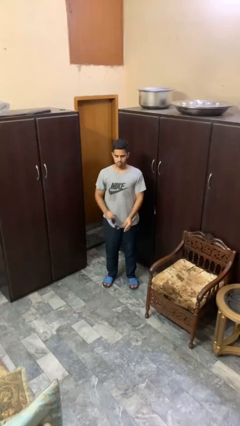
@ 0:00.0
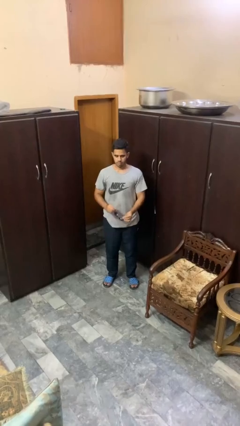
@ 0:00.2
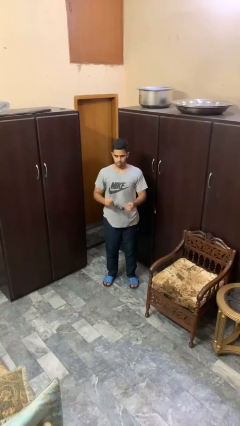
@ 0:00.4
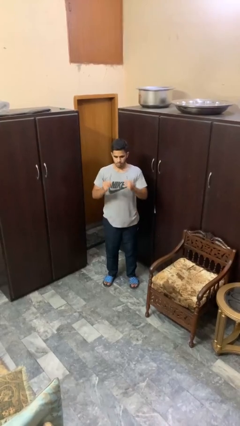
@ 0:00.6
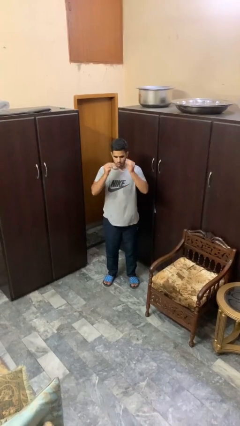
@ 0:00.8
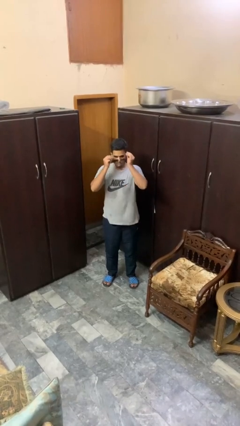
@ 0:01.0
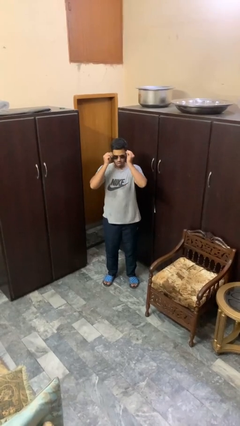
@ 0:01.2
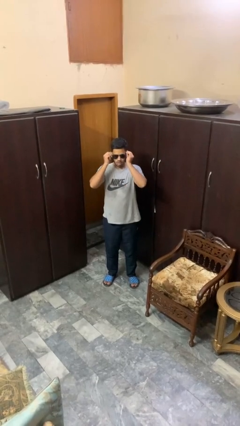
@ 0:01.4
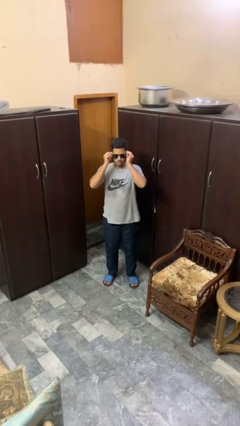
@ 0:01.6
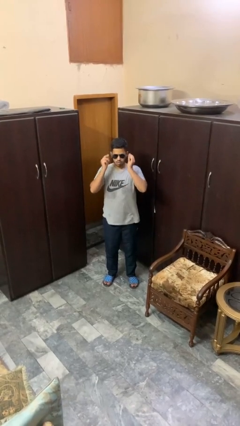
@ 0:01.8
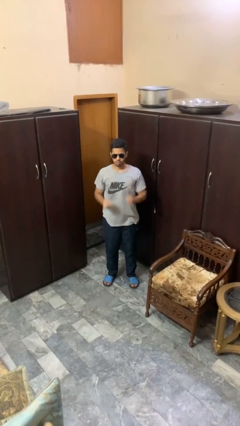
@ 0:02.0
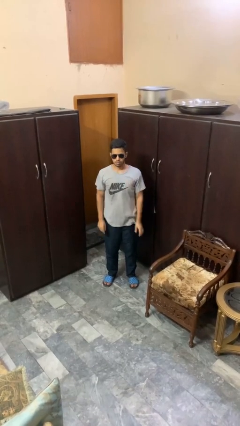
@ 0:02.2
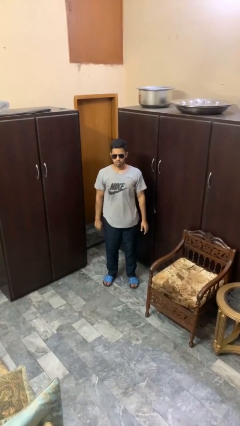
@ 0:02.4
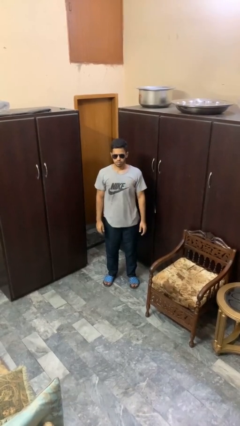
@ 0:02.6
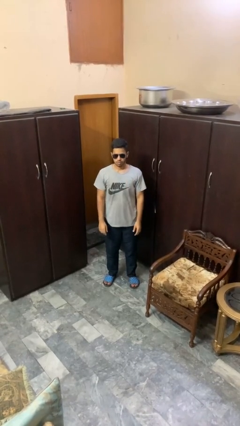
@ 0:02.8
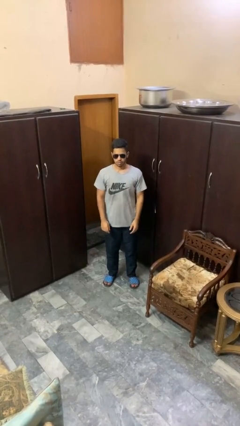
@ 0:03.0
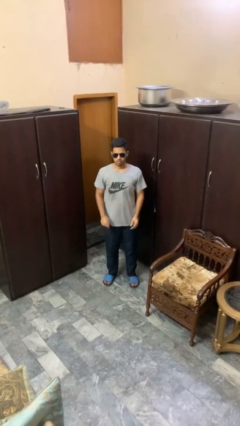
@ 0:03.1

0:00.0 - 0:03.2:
person puts on sunglasses

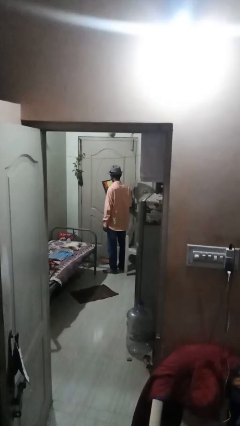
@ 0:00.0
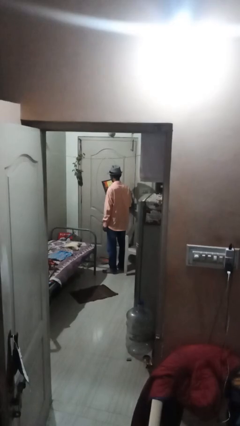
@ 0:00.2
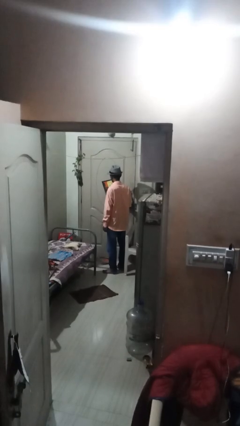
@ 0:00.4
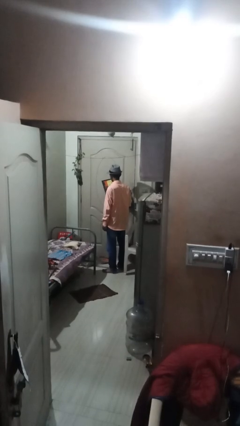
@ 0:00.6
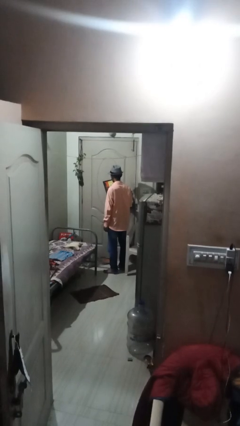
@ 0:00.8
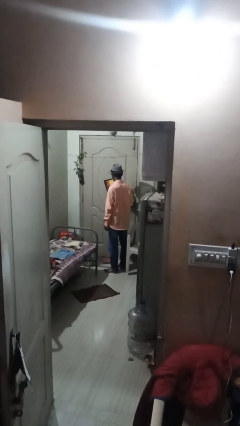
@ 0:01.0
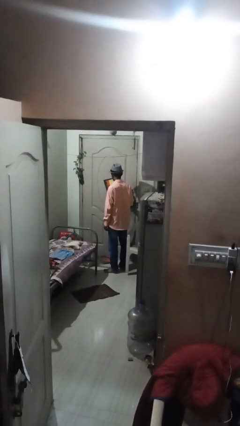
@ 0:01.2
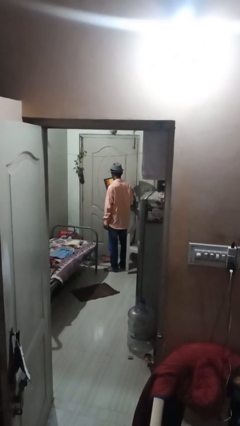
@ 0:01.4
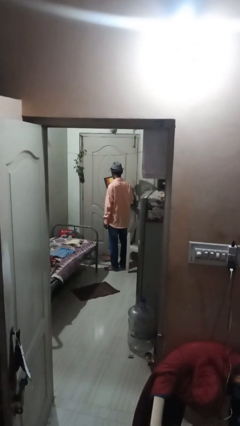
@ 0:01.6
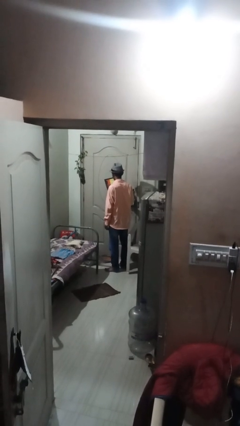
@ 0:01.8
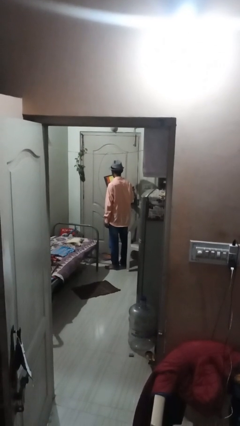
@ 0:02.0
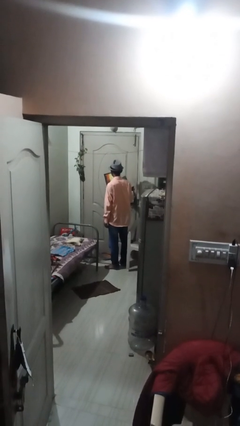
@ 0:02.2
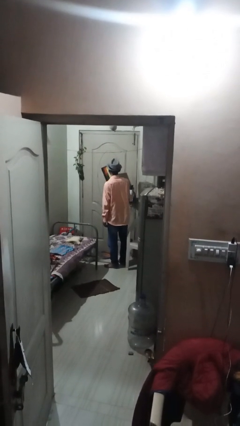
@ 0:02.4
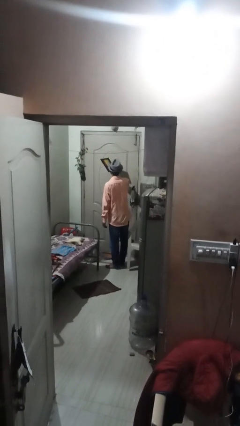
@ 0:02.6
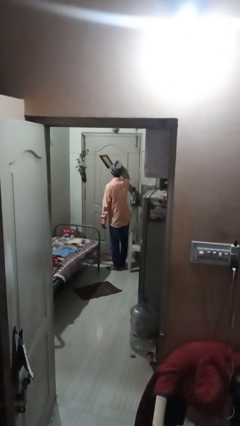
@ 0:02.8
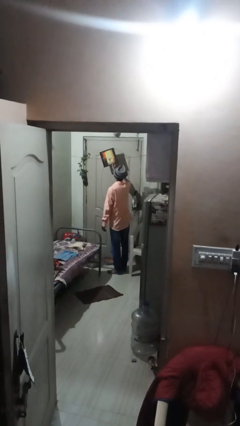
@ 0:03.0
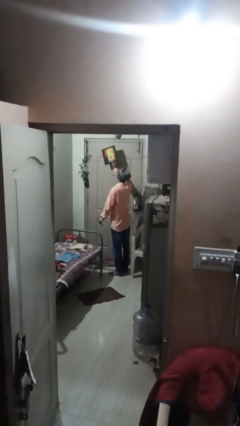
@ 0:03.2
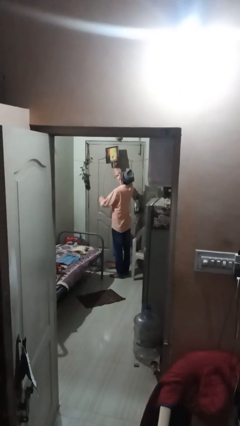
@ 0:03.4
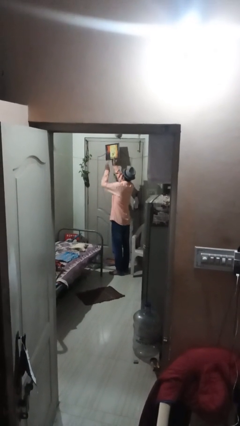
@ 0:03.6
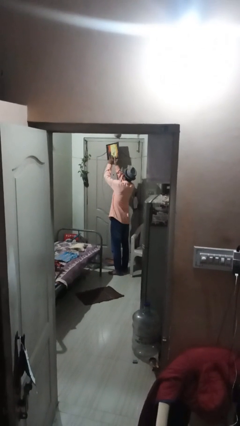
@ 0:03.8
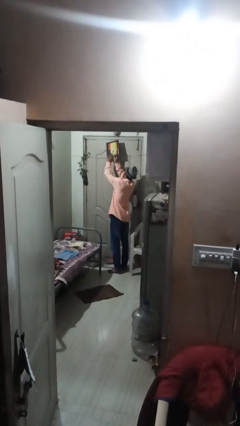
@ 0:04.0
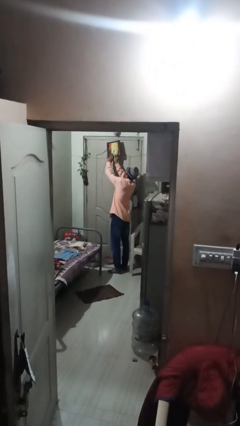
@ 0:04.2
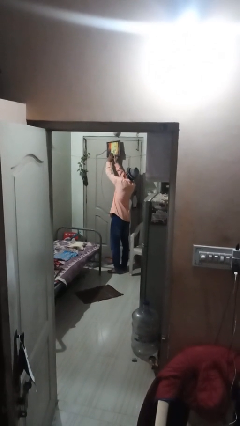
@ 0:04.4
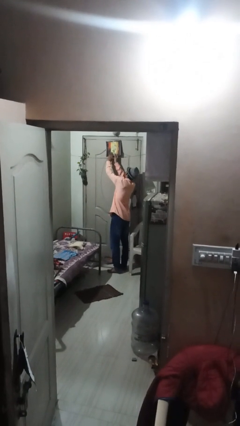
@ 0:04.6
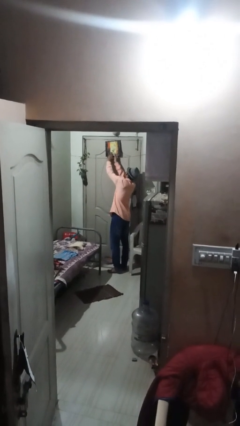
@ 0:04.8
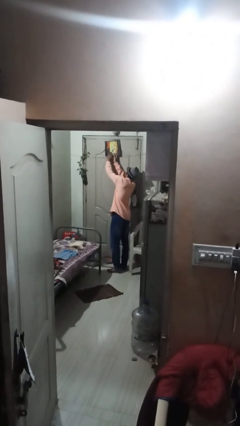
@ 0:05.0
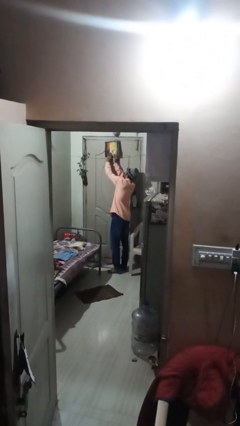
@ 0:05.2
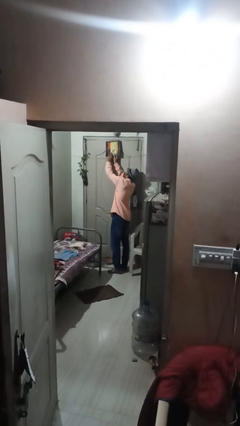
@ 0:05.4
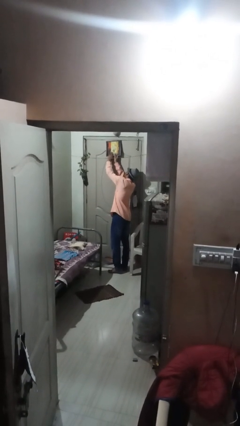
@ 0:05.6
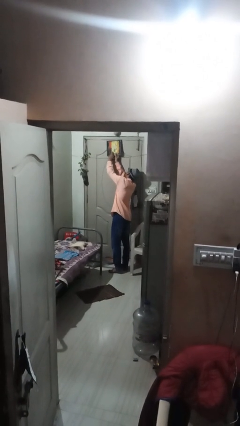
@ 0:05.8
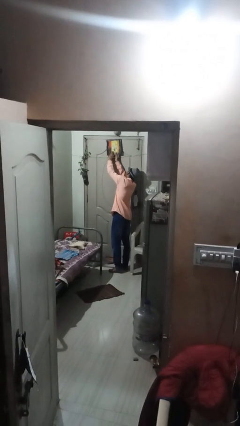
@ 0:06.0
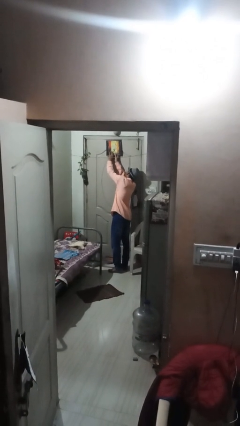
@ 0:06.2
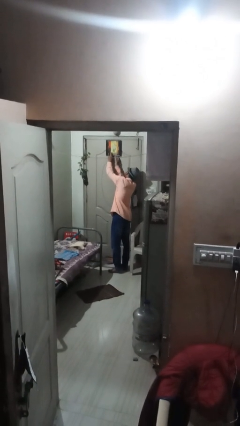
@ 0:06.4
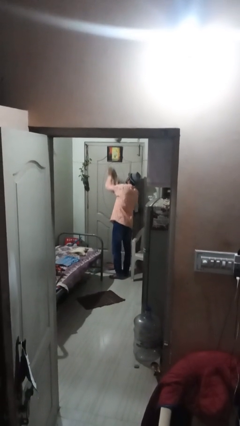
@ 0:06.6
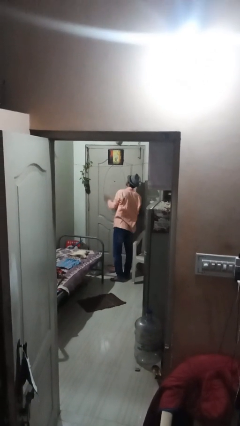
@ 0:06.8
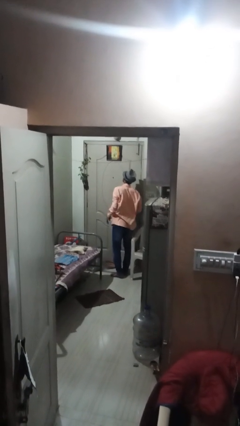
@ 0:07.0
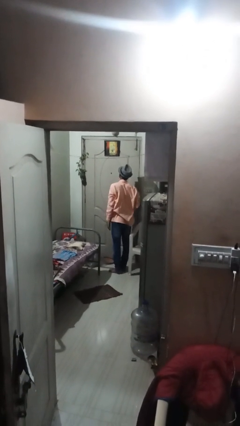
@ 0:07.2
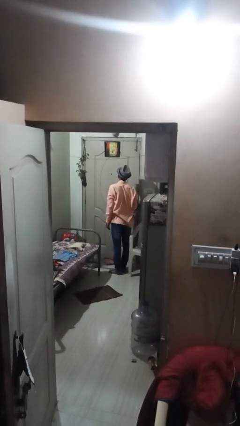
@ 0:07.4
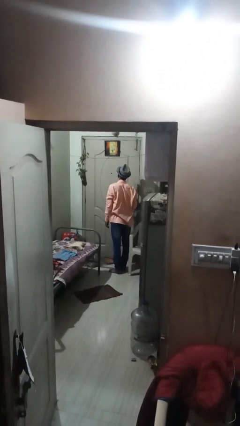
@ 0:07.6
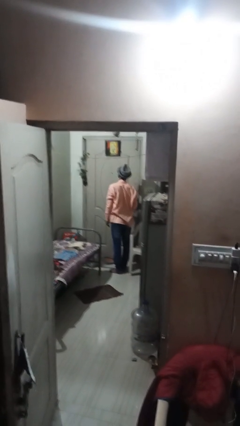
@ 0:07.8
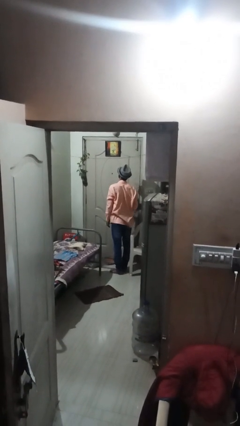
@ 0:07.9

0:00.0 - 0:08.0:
person puts up picture frame

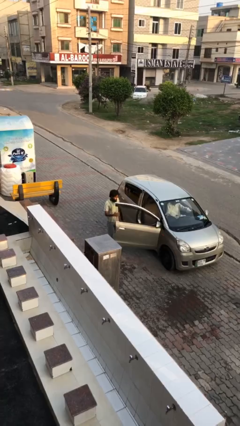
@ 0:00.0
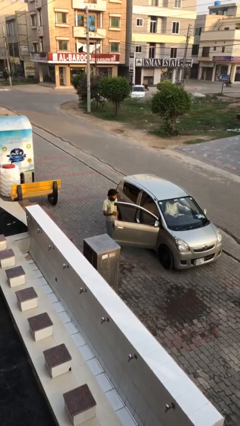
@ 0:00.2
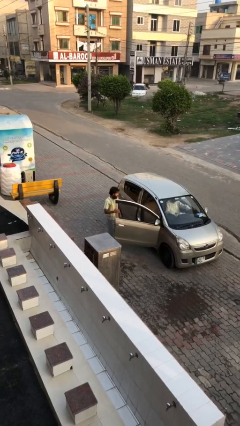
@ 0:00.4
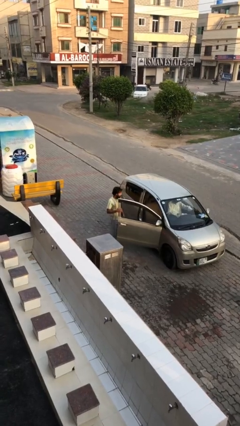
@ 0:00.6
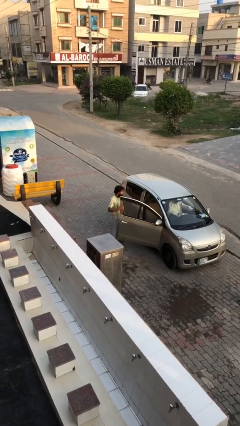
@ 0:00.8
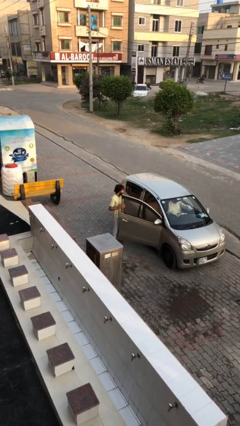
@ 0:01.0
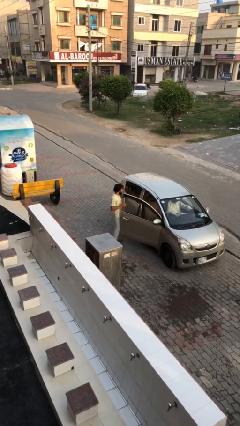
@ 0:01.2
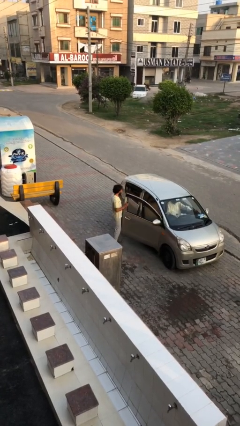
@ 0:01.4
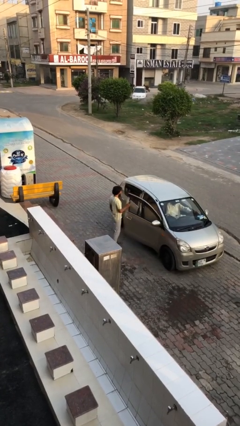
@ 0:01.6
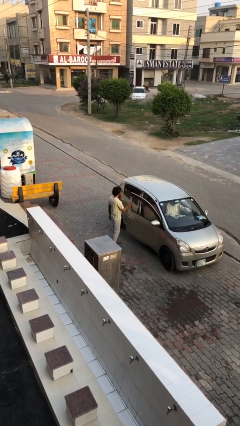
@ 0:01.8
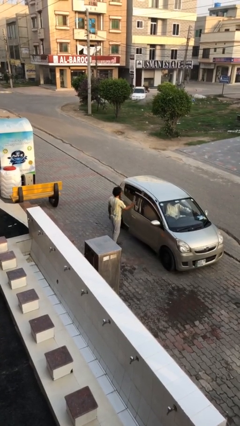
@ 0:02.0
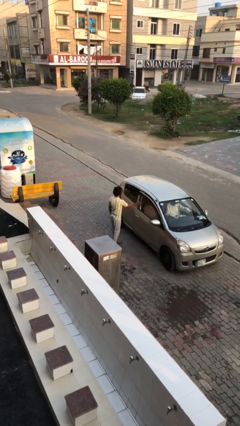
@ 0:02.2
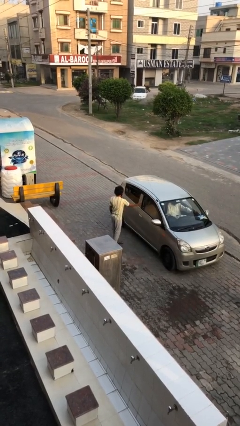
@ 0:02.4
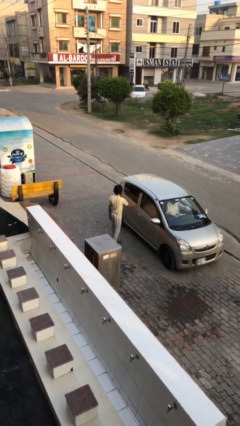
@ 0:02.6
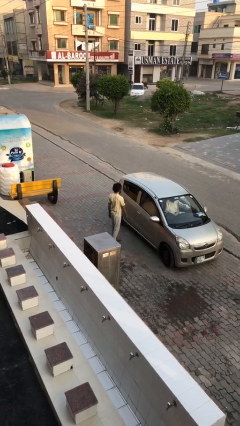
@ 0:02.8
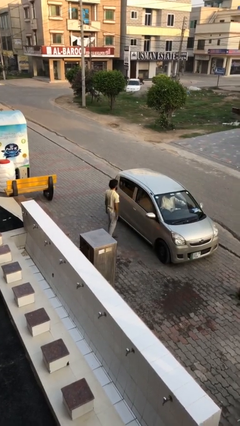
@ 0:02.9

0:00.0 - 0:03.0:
person closes car door

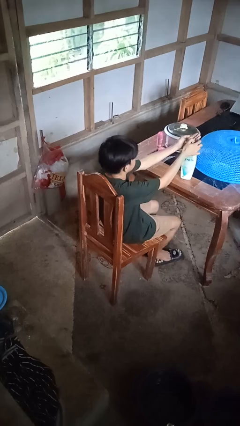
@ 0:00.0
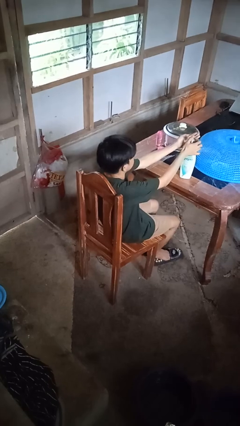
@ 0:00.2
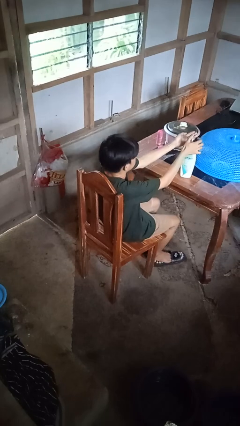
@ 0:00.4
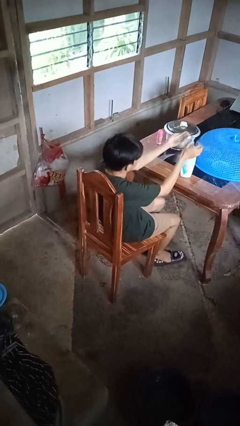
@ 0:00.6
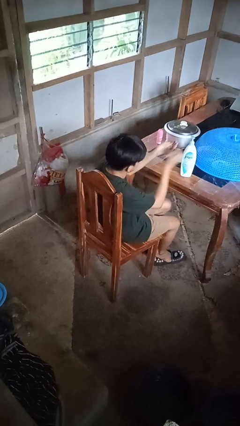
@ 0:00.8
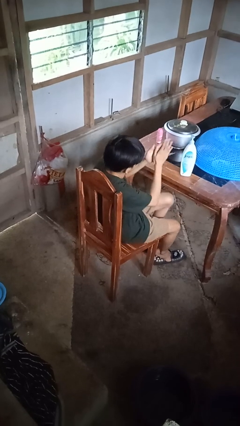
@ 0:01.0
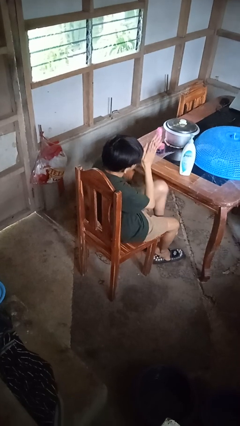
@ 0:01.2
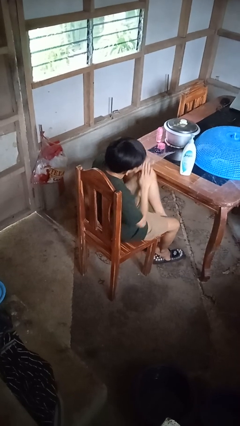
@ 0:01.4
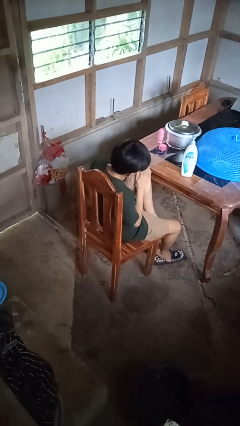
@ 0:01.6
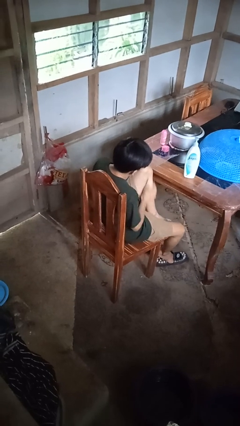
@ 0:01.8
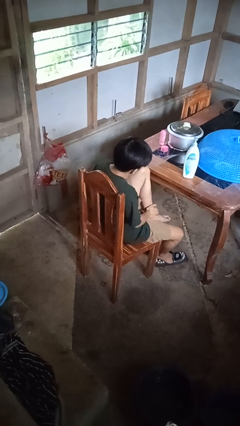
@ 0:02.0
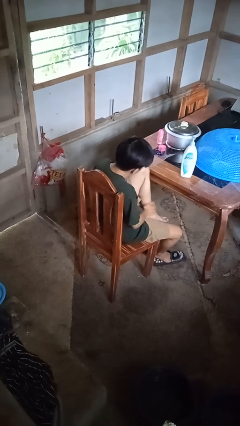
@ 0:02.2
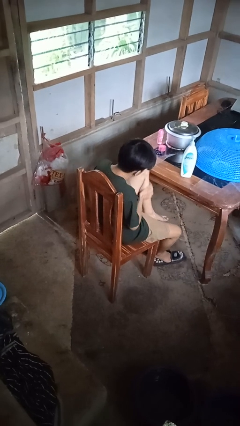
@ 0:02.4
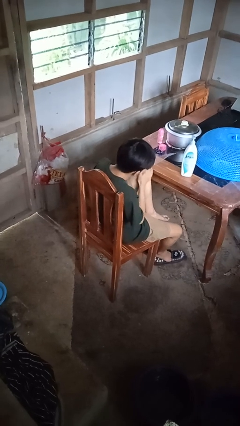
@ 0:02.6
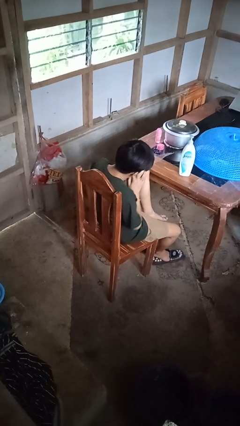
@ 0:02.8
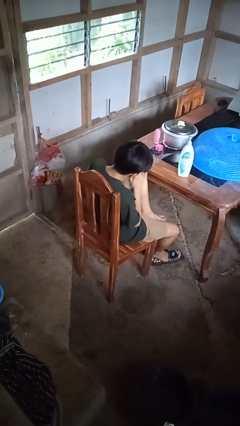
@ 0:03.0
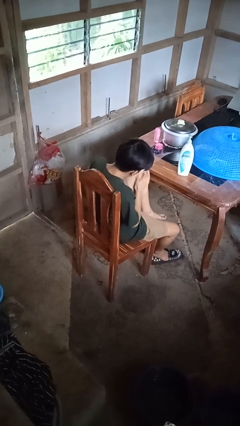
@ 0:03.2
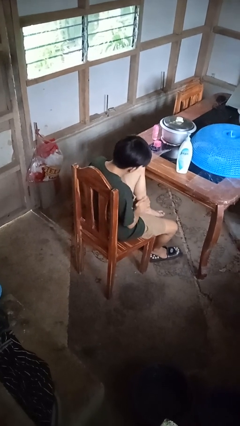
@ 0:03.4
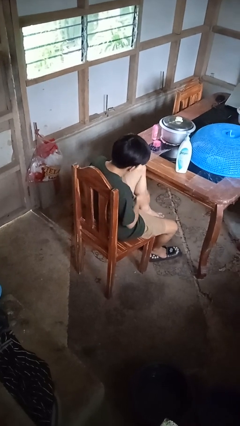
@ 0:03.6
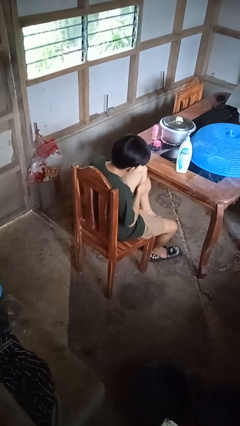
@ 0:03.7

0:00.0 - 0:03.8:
person applies sunscreen
